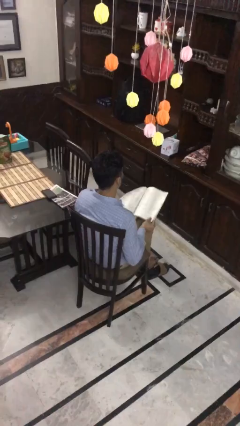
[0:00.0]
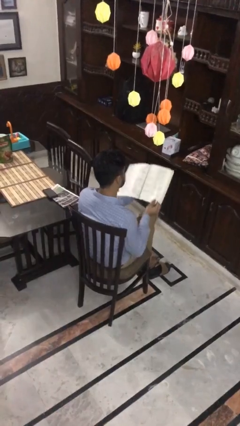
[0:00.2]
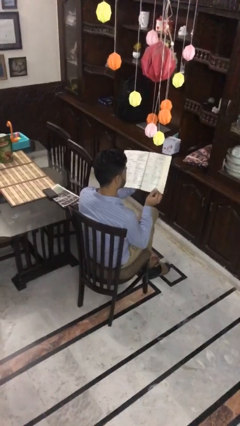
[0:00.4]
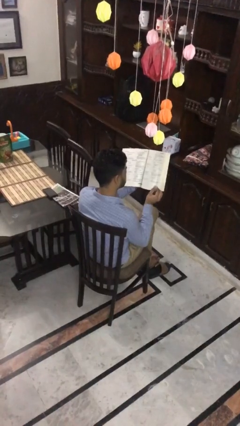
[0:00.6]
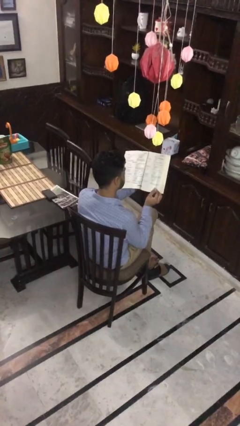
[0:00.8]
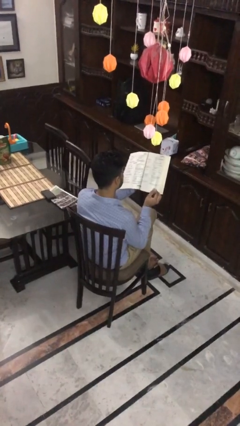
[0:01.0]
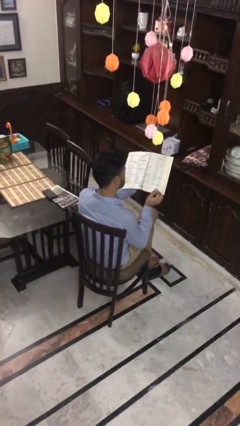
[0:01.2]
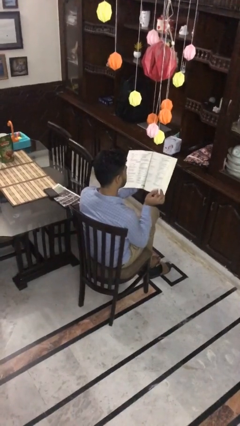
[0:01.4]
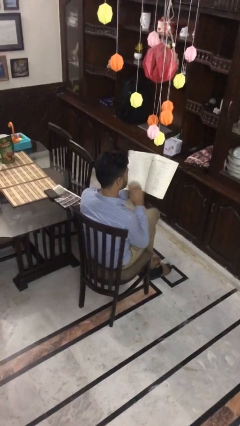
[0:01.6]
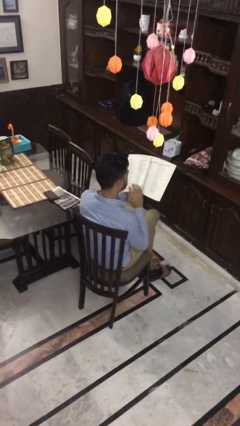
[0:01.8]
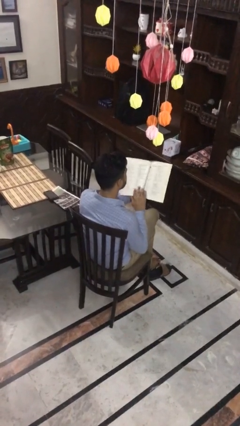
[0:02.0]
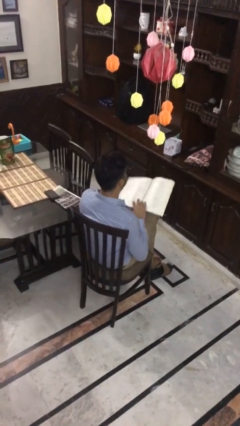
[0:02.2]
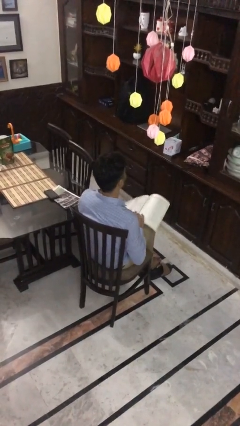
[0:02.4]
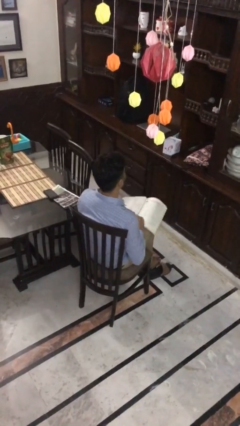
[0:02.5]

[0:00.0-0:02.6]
person reads book

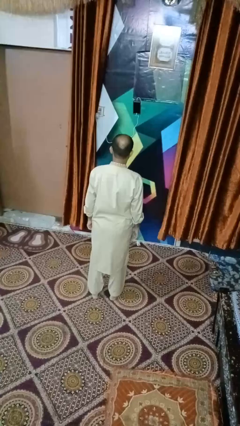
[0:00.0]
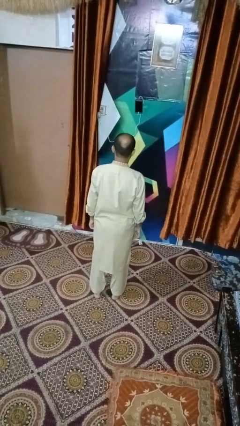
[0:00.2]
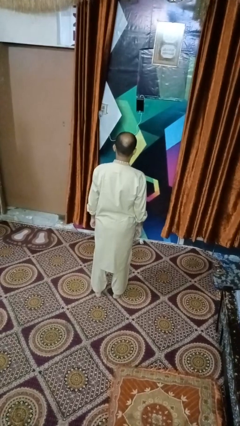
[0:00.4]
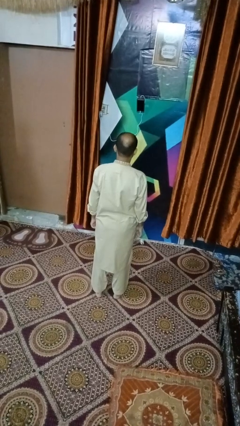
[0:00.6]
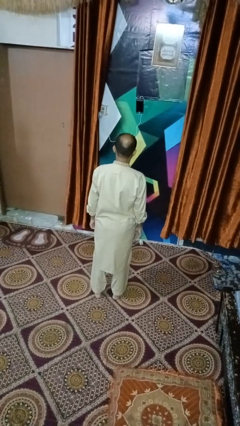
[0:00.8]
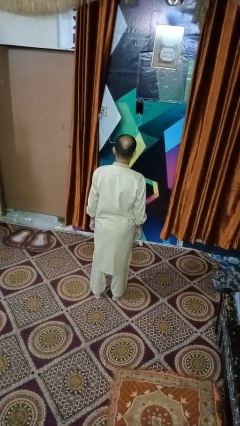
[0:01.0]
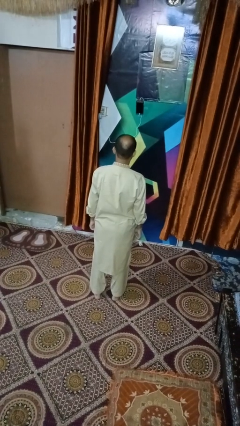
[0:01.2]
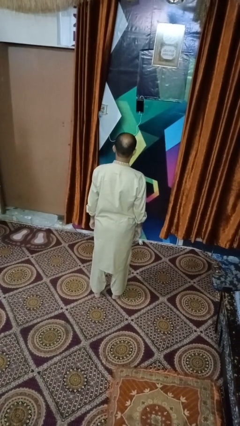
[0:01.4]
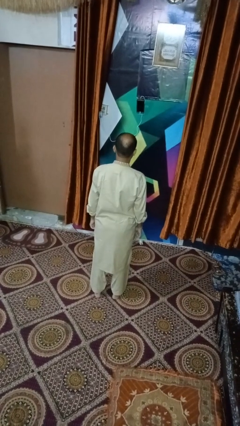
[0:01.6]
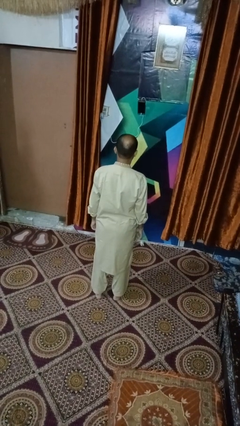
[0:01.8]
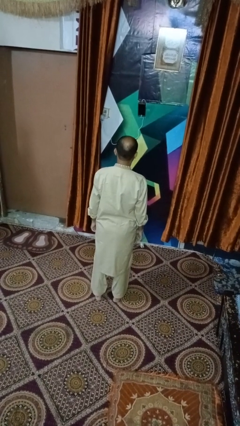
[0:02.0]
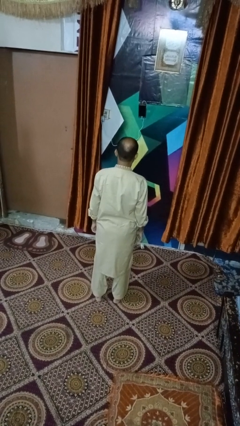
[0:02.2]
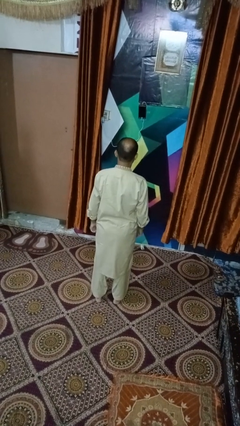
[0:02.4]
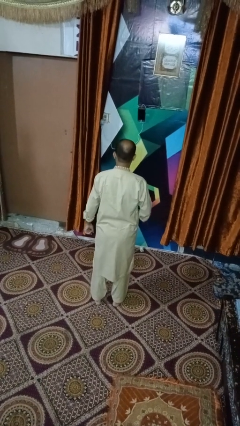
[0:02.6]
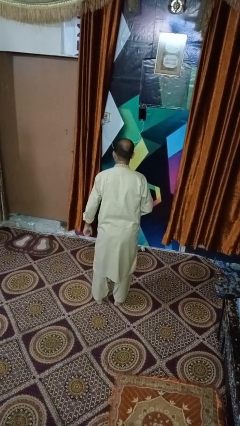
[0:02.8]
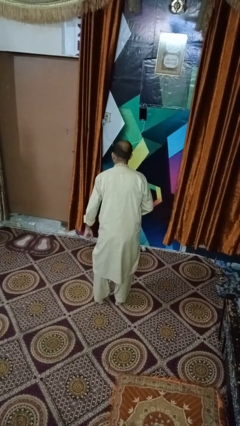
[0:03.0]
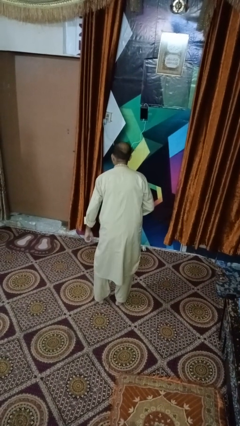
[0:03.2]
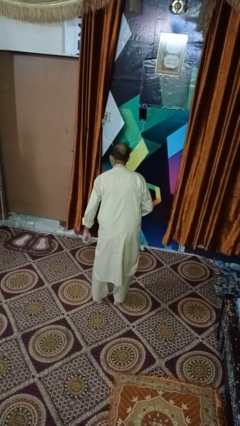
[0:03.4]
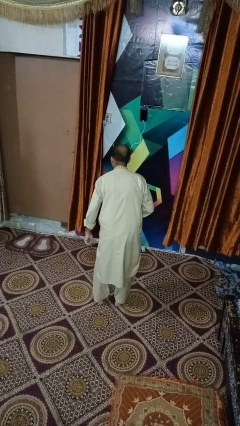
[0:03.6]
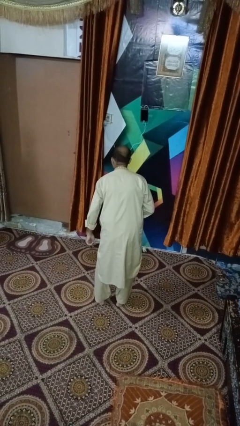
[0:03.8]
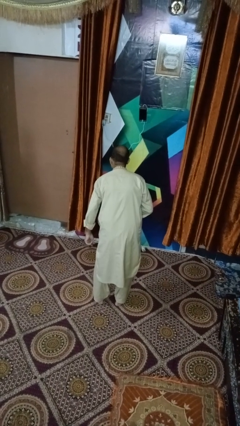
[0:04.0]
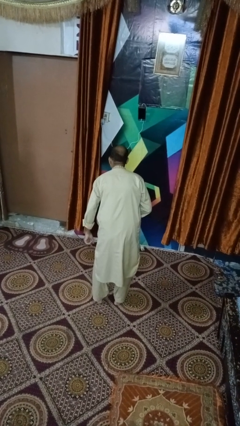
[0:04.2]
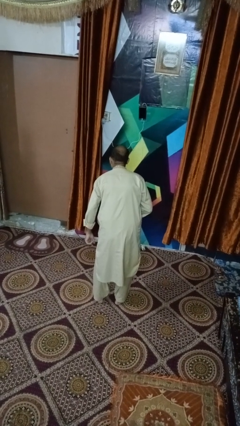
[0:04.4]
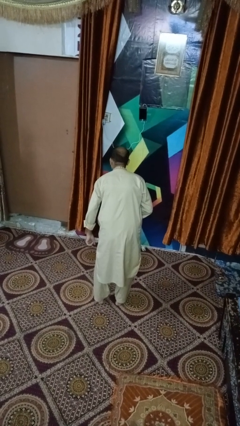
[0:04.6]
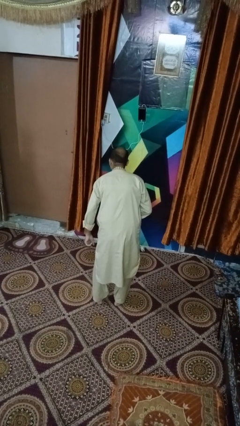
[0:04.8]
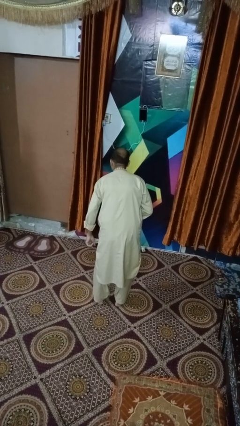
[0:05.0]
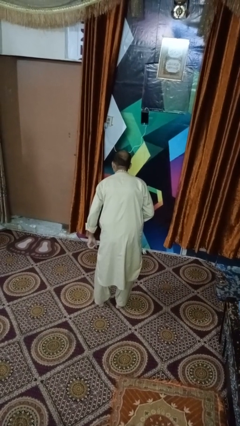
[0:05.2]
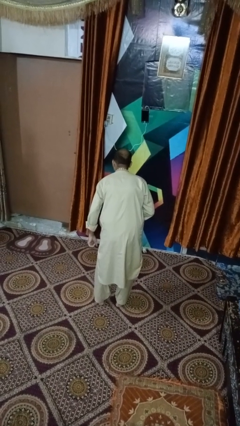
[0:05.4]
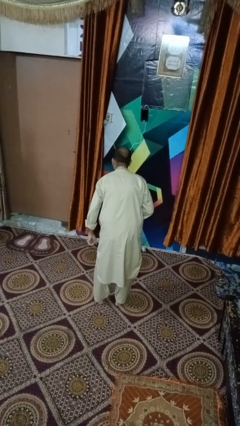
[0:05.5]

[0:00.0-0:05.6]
person bows

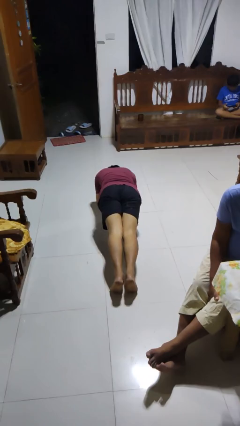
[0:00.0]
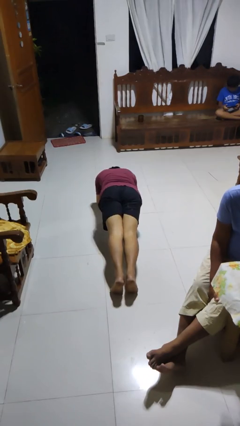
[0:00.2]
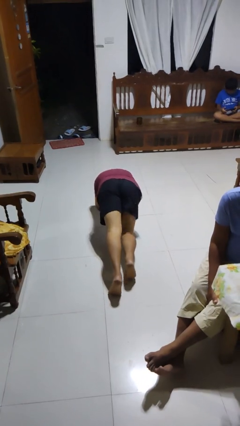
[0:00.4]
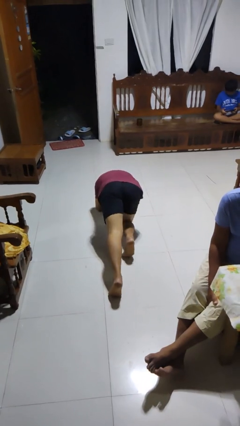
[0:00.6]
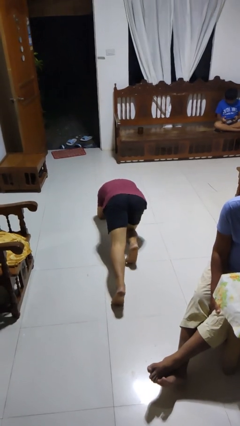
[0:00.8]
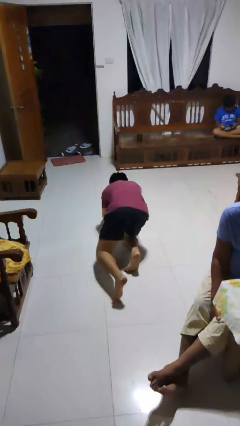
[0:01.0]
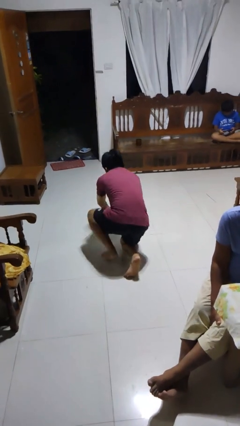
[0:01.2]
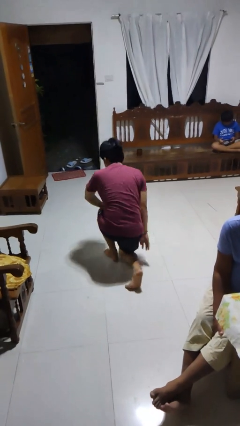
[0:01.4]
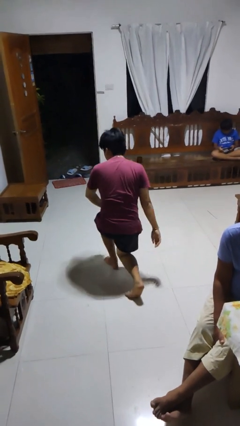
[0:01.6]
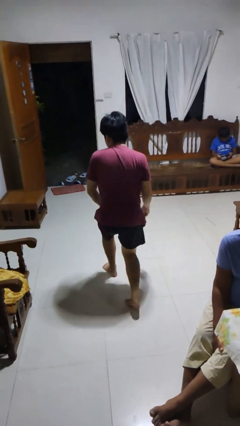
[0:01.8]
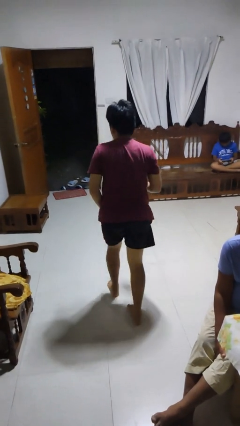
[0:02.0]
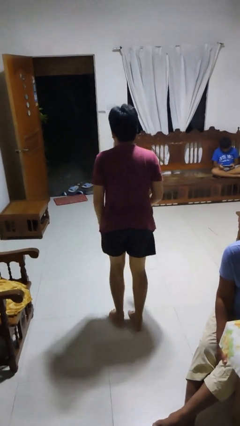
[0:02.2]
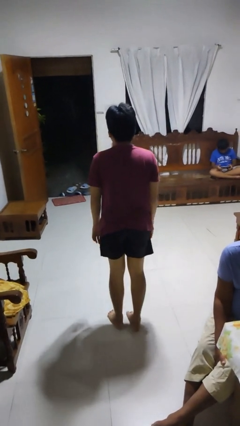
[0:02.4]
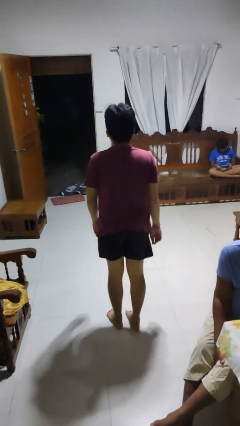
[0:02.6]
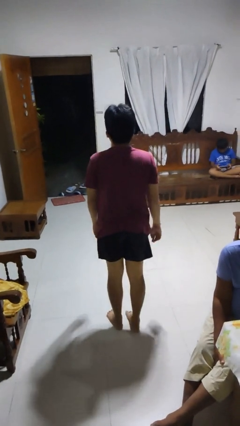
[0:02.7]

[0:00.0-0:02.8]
person stands up from floor

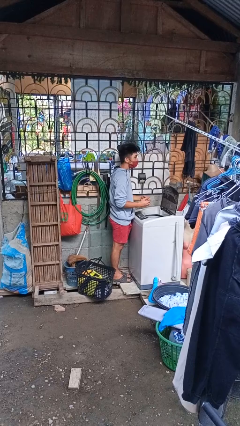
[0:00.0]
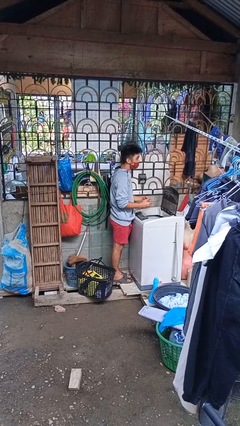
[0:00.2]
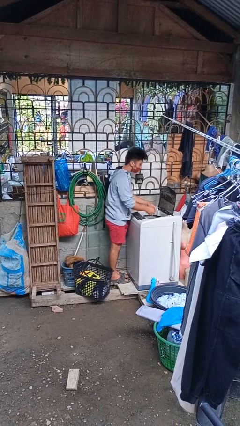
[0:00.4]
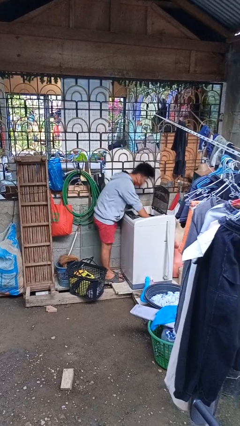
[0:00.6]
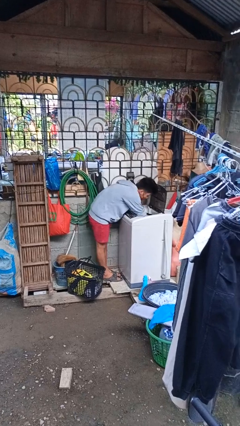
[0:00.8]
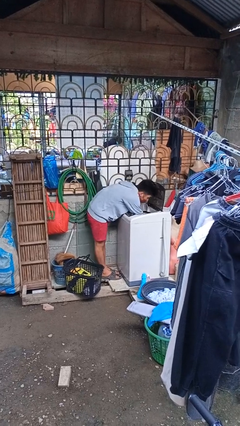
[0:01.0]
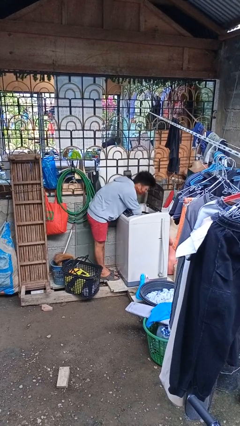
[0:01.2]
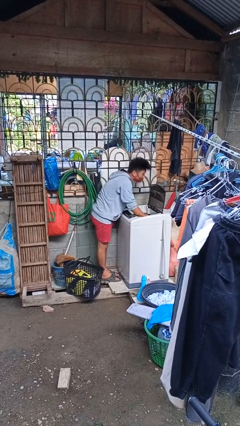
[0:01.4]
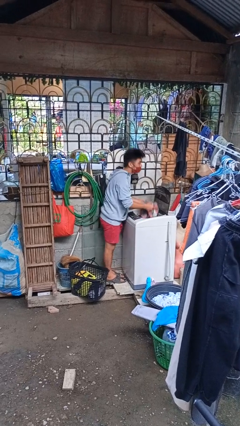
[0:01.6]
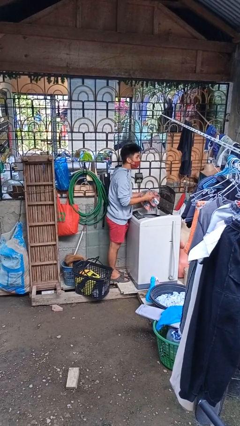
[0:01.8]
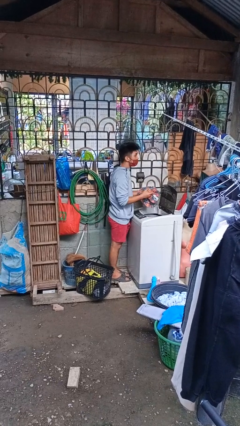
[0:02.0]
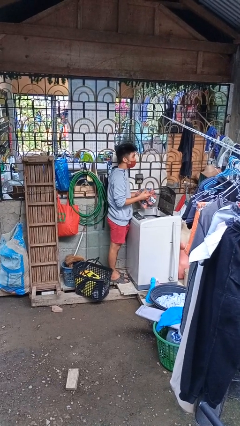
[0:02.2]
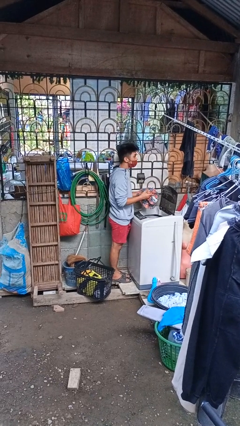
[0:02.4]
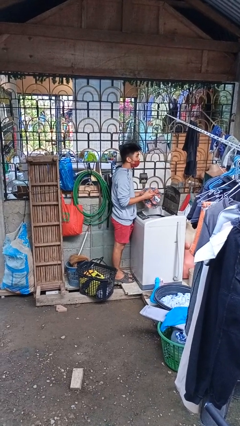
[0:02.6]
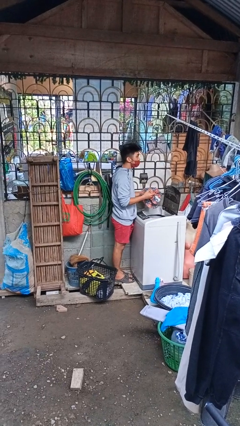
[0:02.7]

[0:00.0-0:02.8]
person unloads clotheswasher

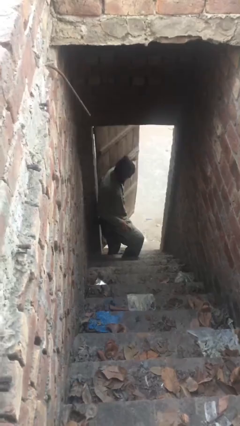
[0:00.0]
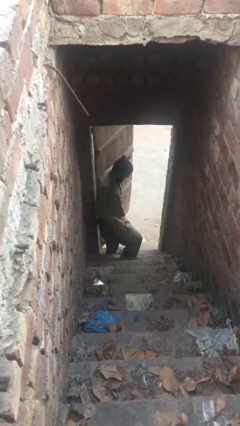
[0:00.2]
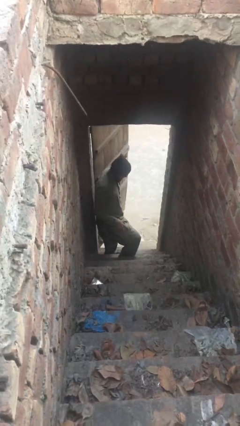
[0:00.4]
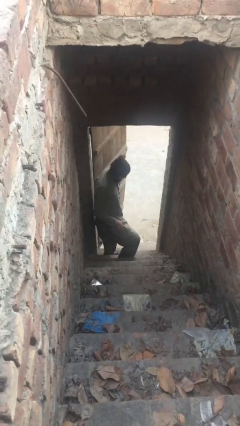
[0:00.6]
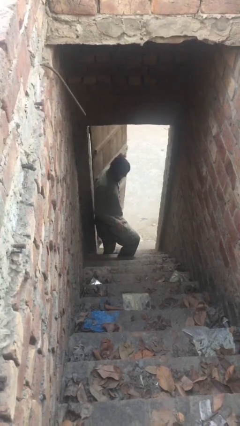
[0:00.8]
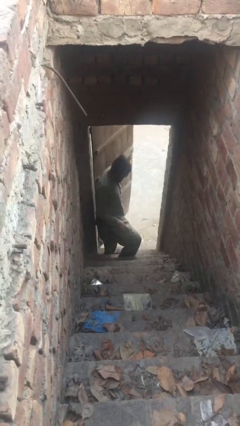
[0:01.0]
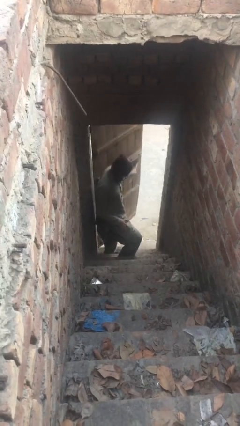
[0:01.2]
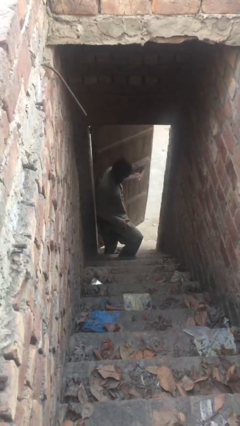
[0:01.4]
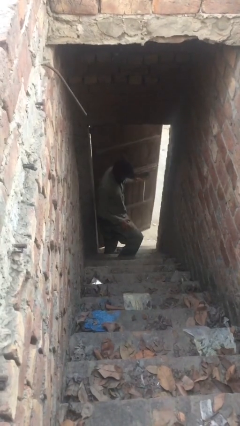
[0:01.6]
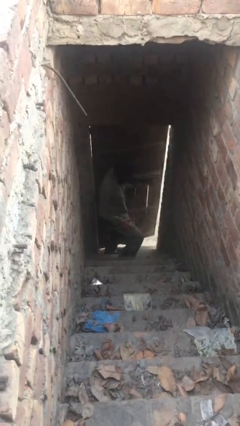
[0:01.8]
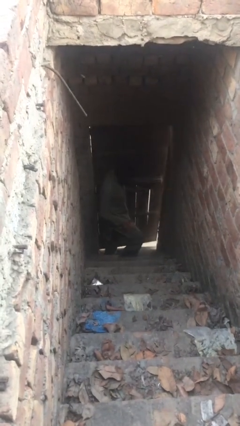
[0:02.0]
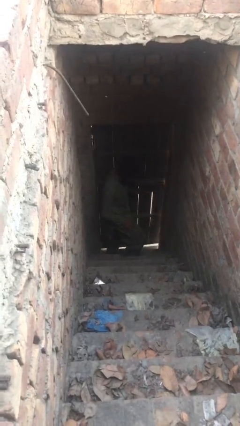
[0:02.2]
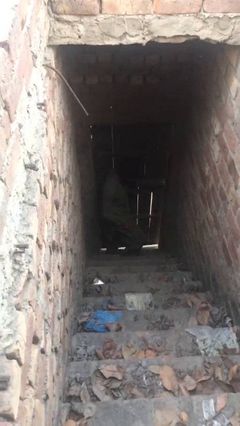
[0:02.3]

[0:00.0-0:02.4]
person closes facility door

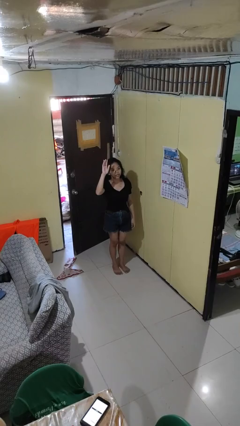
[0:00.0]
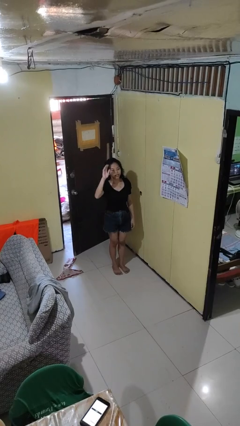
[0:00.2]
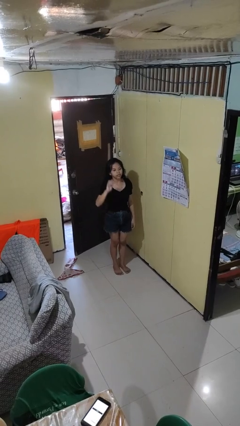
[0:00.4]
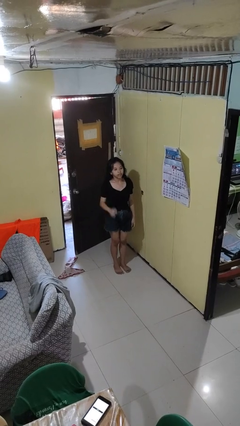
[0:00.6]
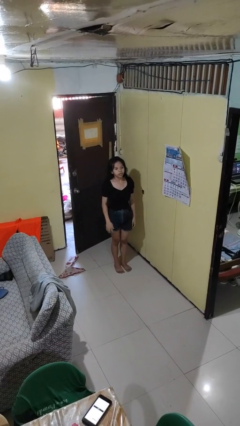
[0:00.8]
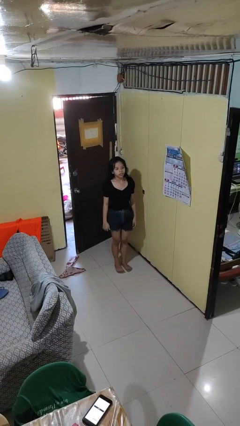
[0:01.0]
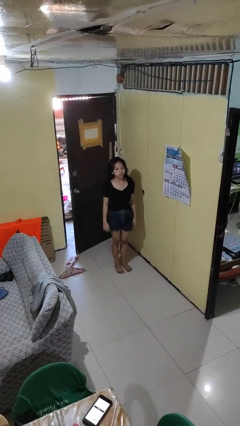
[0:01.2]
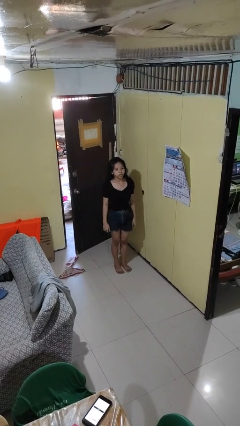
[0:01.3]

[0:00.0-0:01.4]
person gestures lower hand

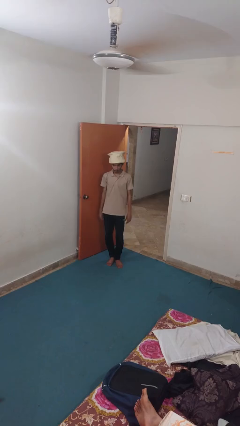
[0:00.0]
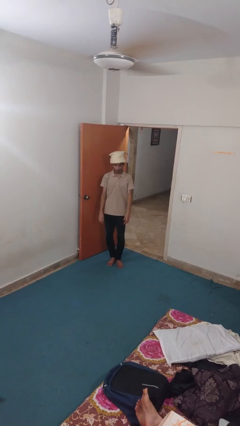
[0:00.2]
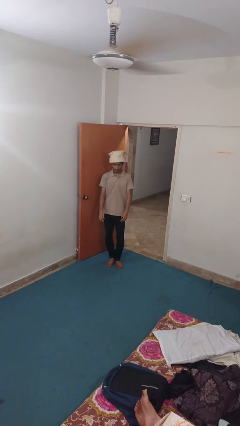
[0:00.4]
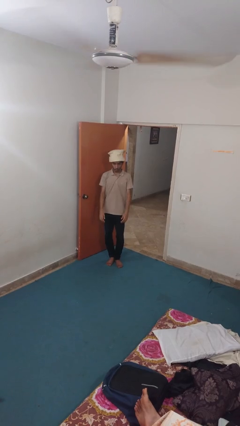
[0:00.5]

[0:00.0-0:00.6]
person takes off hat
